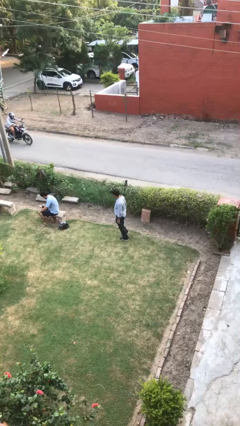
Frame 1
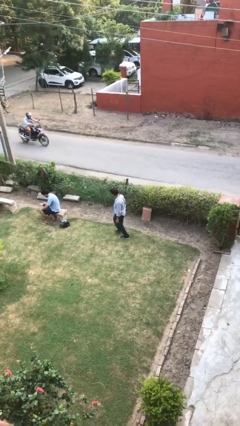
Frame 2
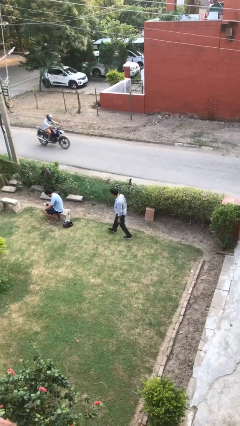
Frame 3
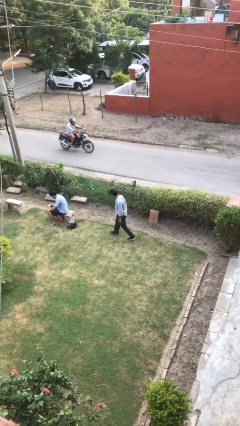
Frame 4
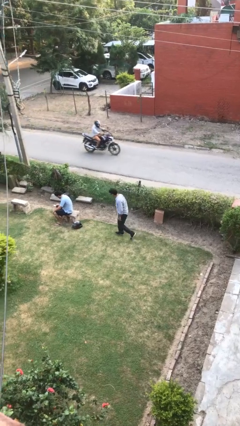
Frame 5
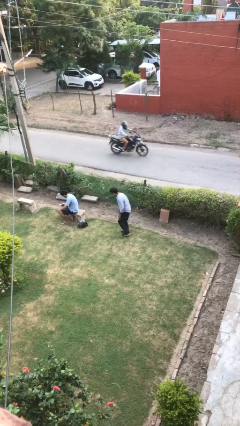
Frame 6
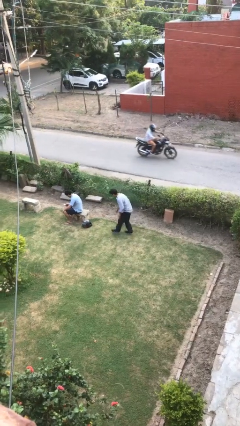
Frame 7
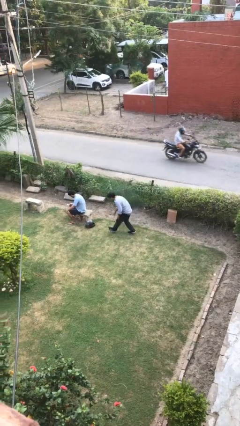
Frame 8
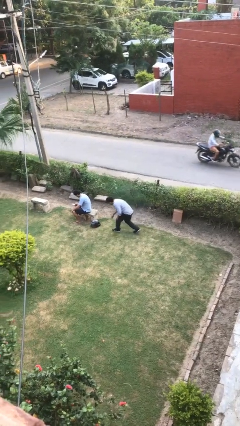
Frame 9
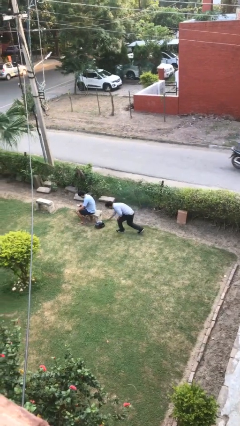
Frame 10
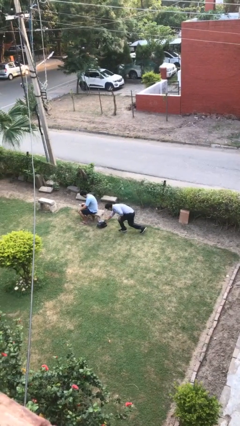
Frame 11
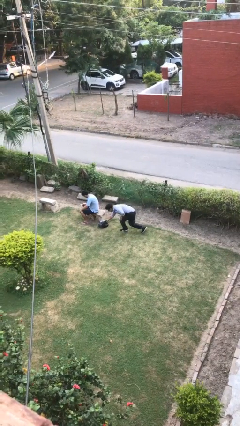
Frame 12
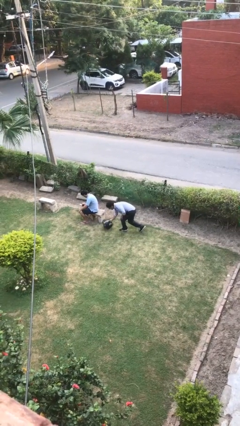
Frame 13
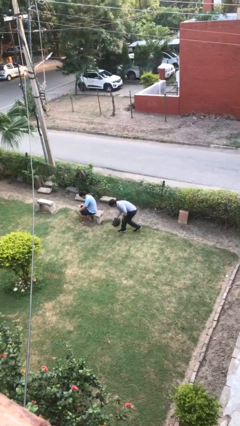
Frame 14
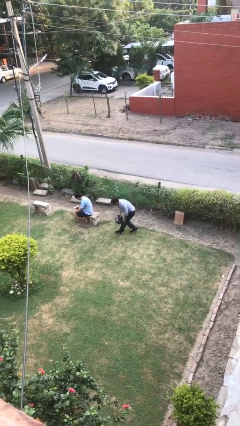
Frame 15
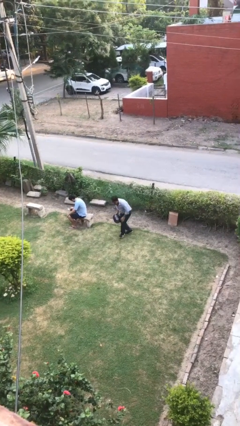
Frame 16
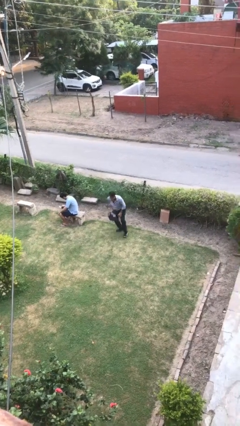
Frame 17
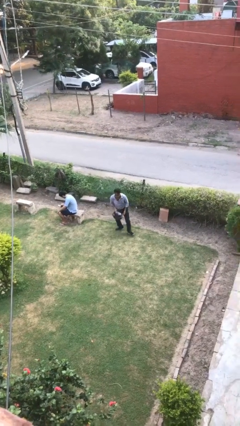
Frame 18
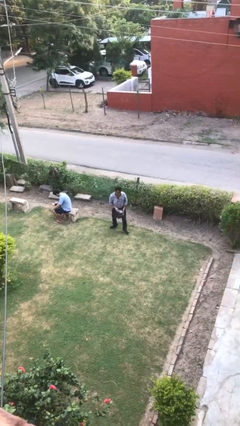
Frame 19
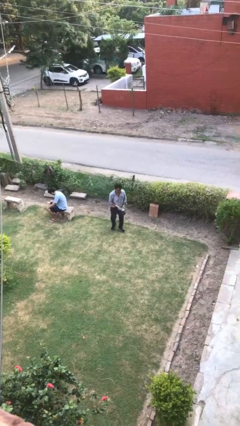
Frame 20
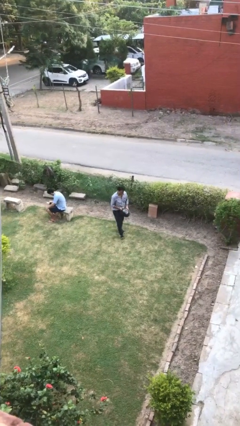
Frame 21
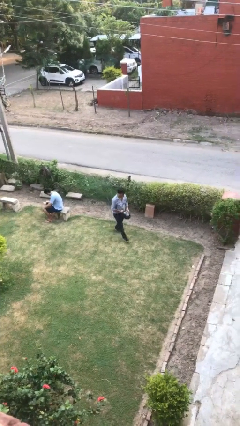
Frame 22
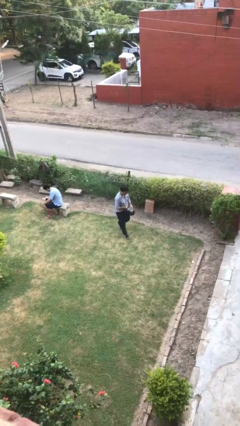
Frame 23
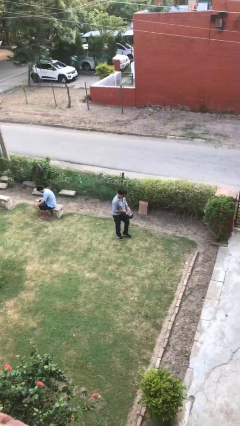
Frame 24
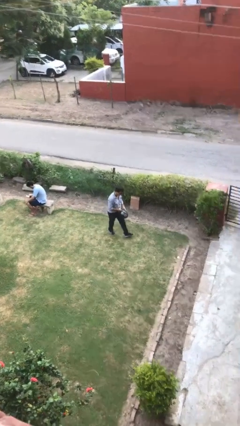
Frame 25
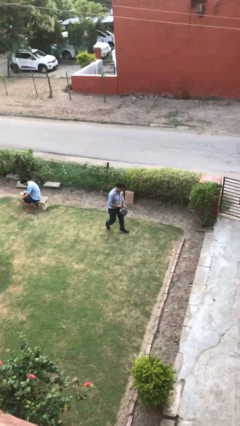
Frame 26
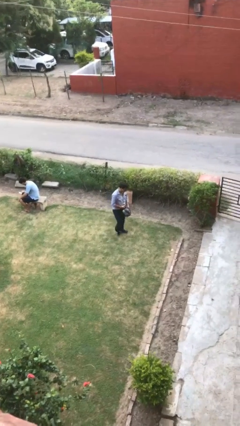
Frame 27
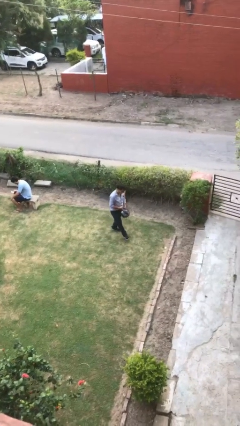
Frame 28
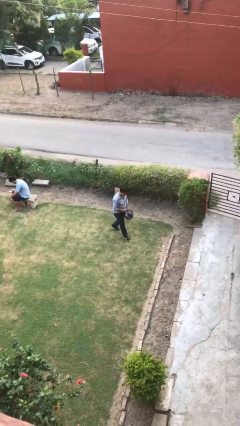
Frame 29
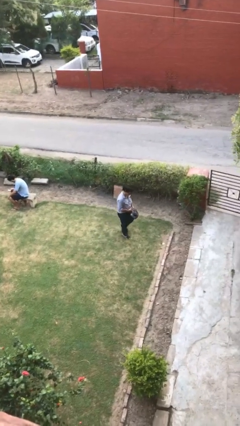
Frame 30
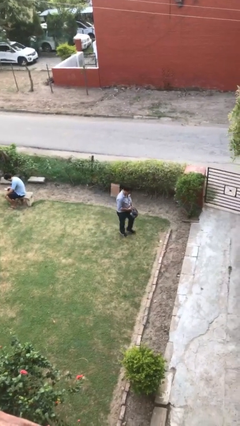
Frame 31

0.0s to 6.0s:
person steals object from person

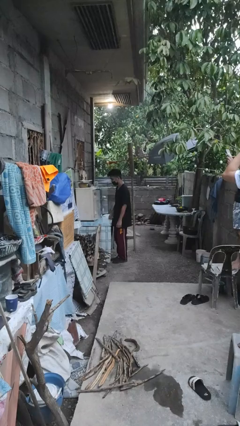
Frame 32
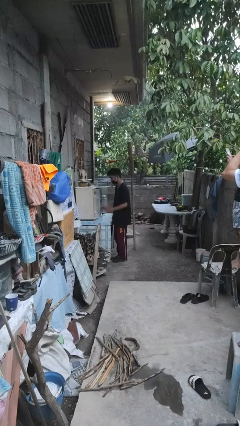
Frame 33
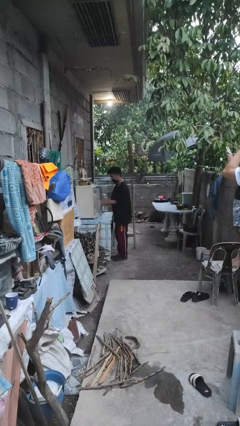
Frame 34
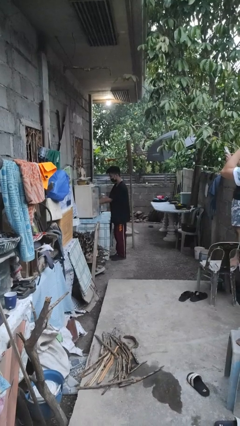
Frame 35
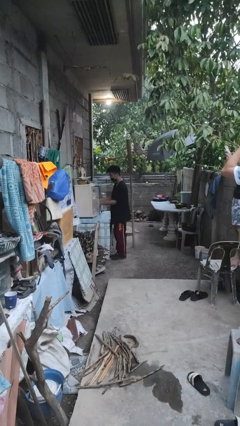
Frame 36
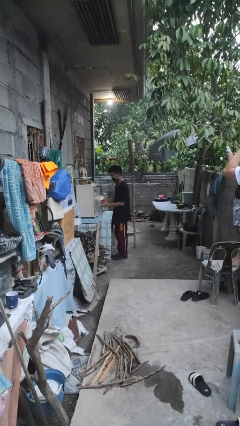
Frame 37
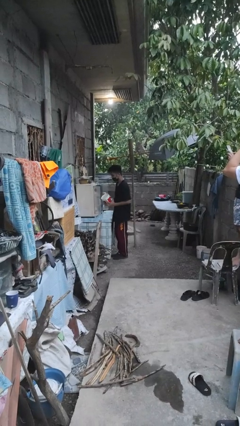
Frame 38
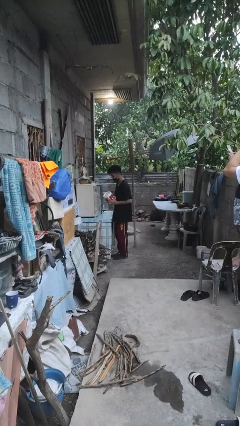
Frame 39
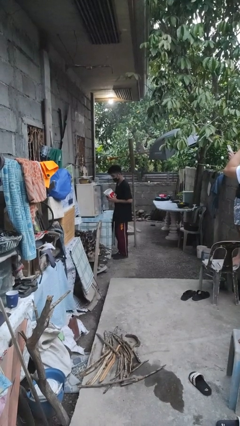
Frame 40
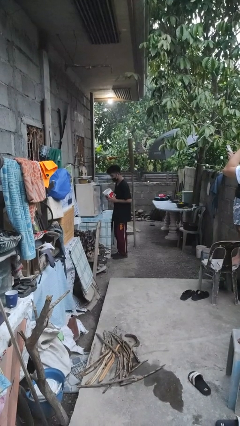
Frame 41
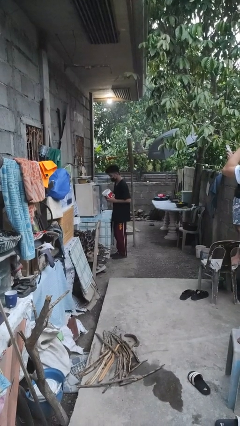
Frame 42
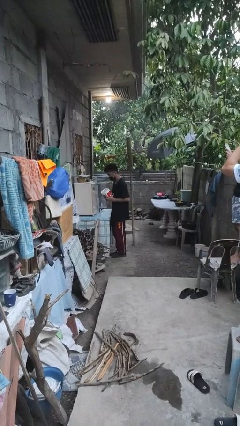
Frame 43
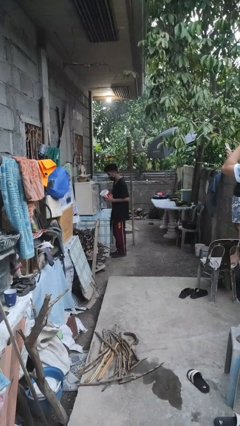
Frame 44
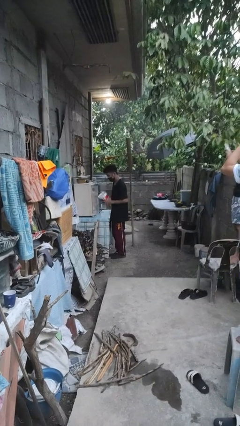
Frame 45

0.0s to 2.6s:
person picks up object from cabinet

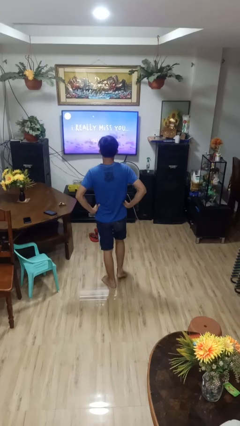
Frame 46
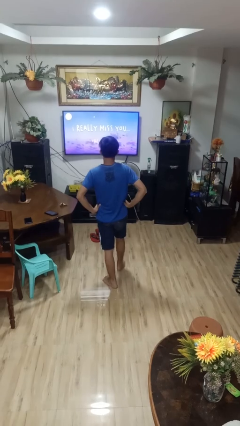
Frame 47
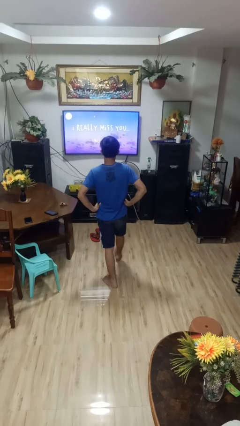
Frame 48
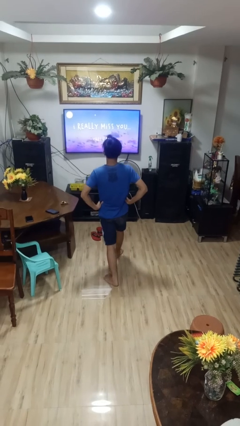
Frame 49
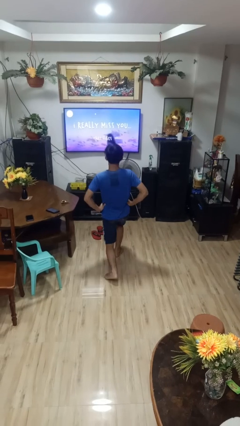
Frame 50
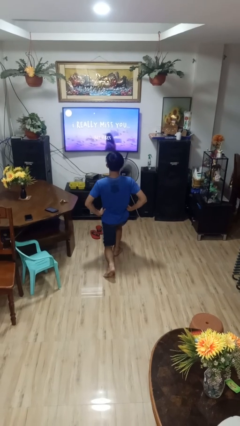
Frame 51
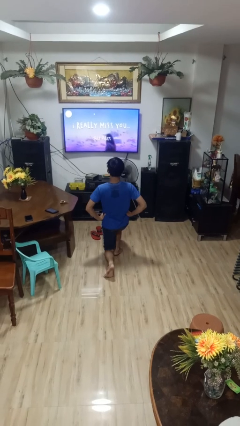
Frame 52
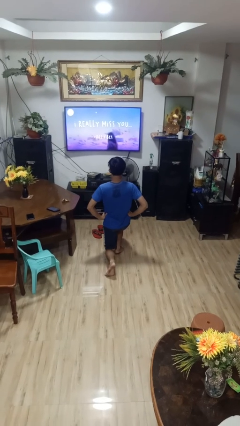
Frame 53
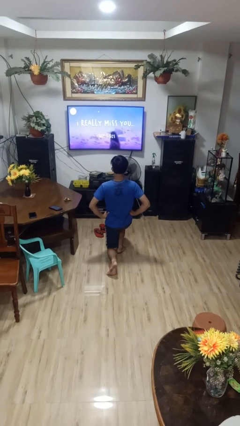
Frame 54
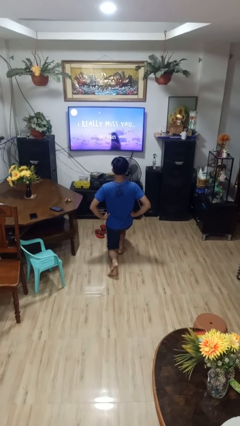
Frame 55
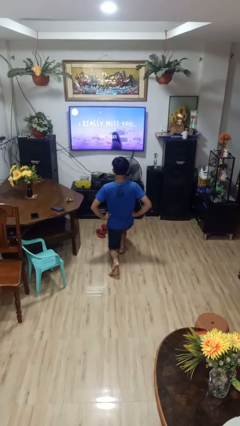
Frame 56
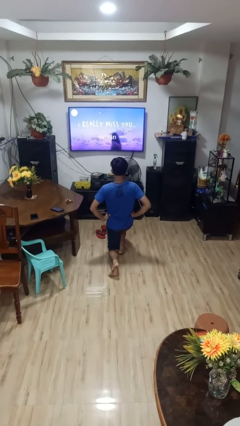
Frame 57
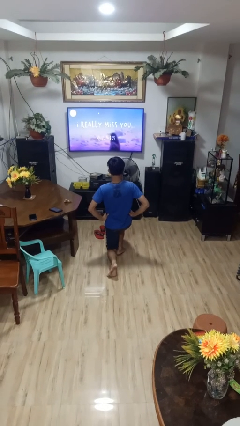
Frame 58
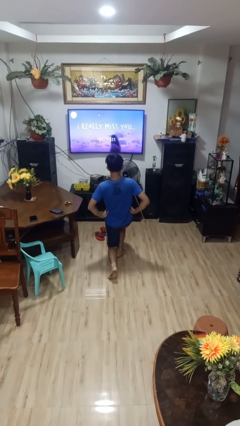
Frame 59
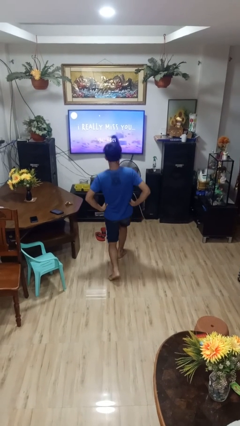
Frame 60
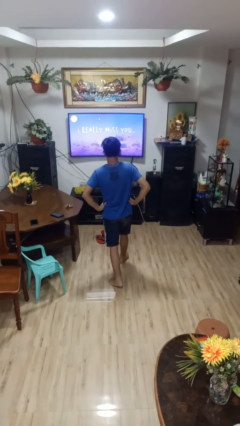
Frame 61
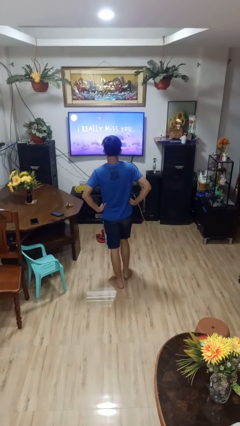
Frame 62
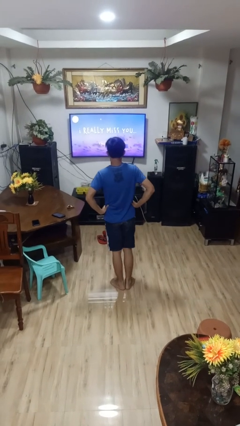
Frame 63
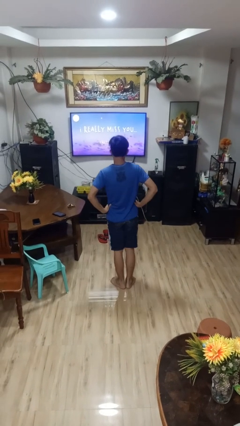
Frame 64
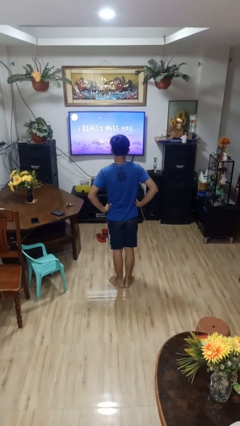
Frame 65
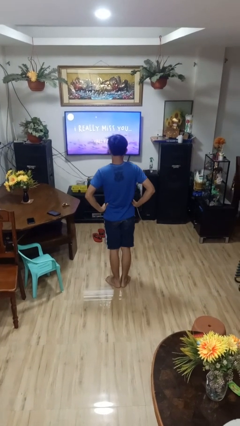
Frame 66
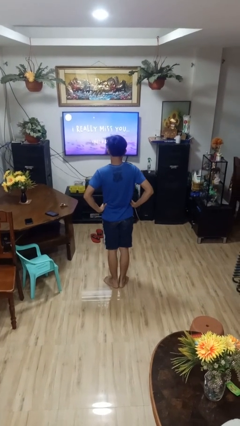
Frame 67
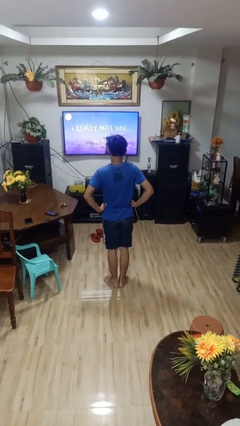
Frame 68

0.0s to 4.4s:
person exercises with lunges

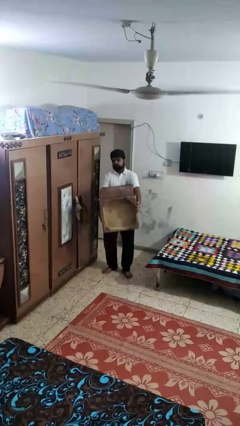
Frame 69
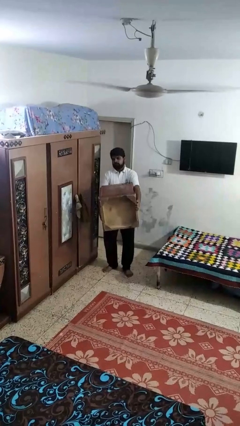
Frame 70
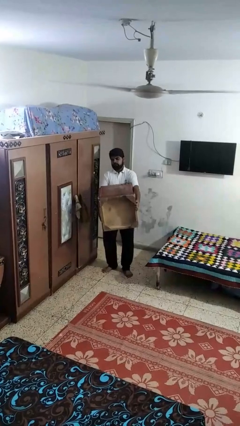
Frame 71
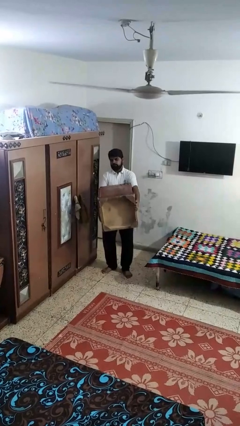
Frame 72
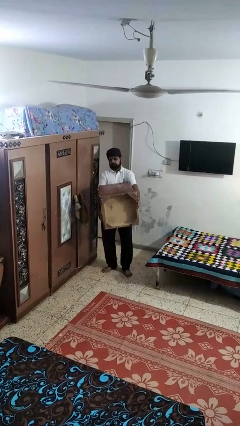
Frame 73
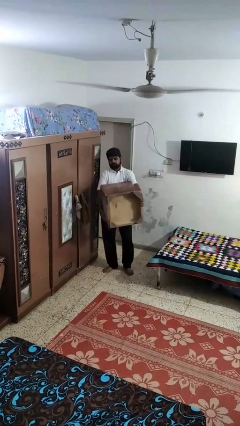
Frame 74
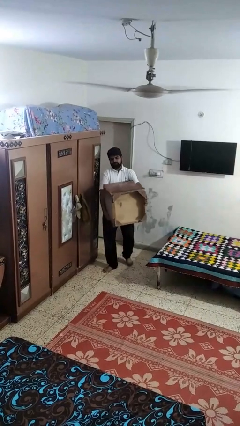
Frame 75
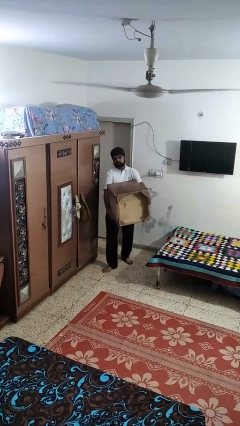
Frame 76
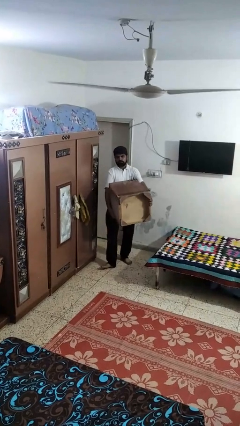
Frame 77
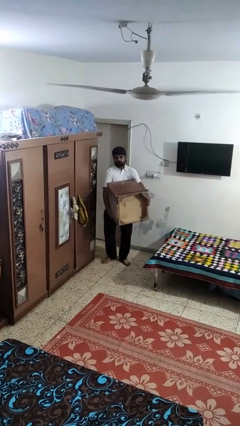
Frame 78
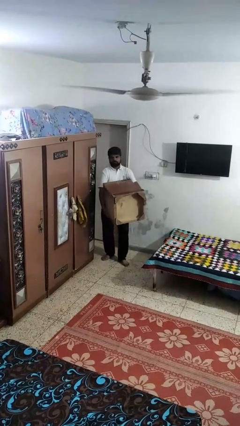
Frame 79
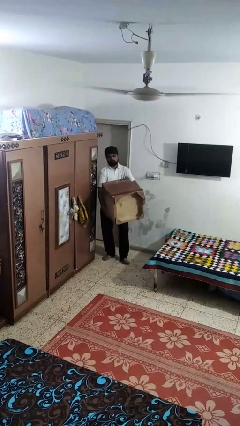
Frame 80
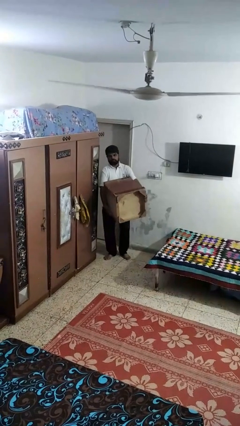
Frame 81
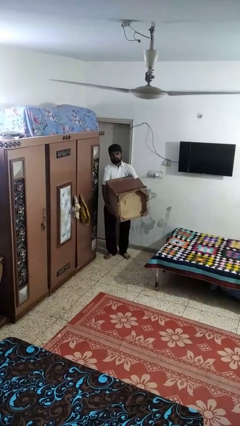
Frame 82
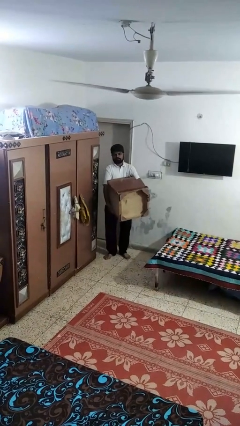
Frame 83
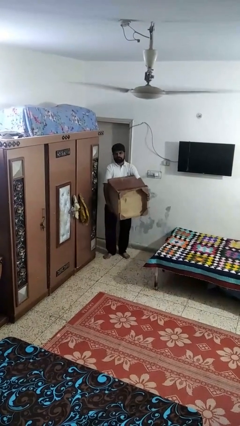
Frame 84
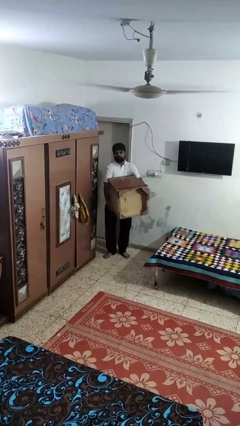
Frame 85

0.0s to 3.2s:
person carries furniture

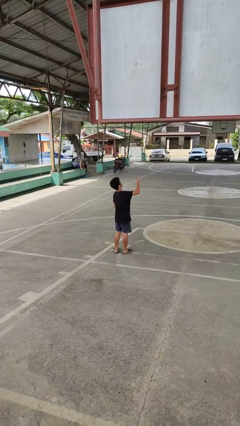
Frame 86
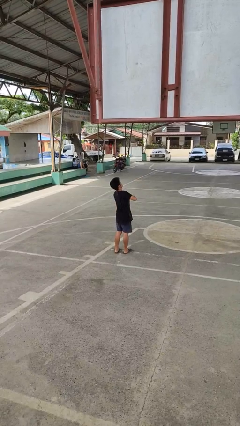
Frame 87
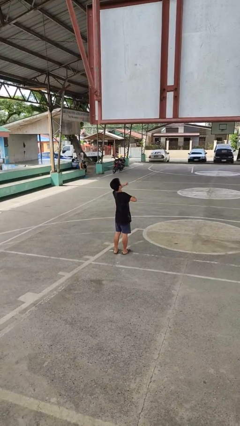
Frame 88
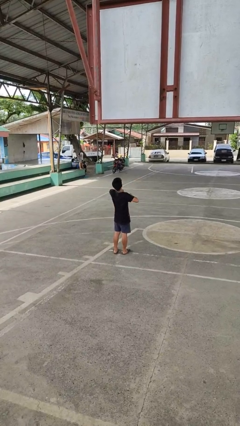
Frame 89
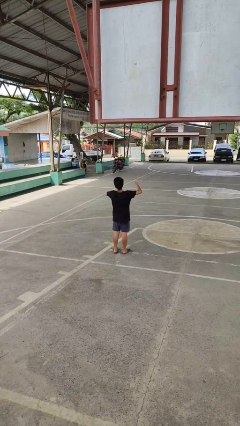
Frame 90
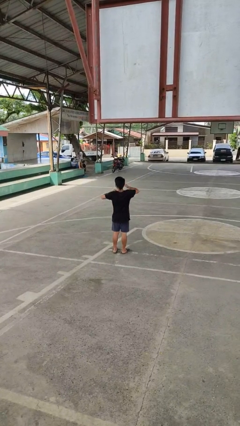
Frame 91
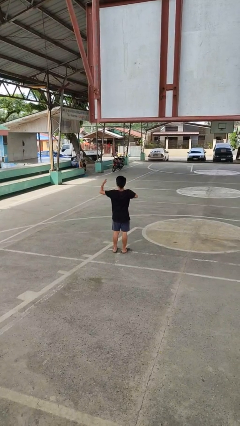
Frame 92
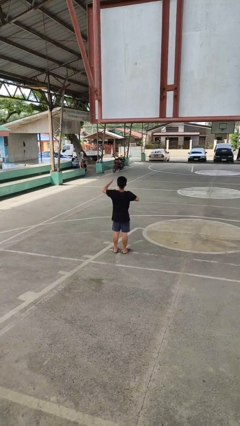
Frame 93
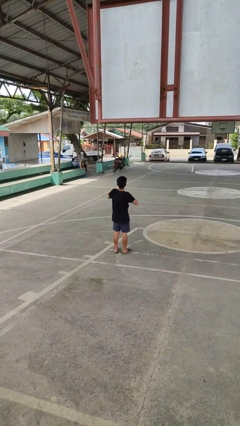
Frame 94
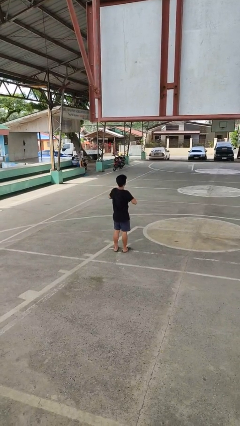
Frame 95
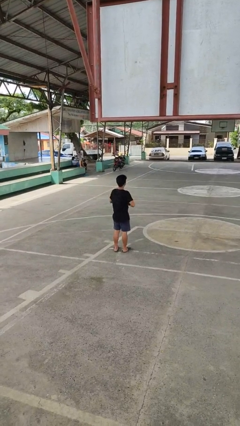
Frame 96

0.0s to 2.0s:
person drums on chest
